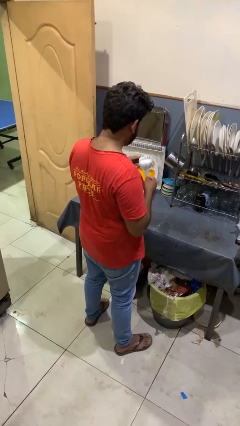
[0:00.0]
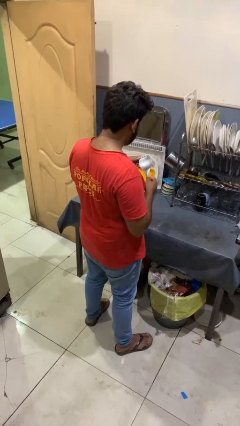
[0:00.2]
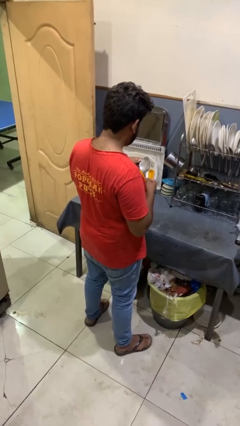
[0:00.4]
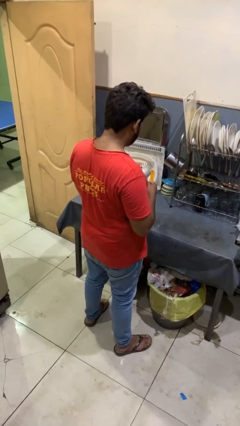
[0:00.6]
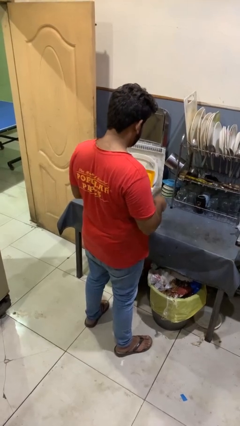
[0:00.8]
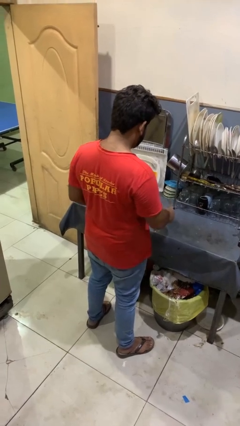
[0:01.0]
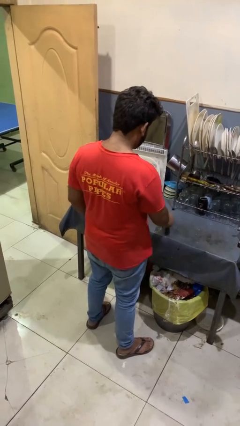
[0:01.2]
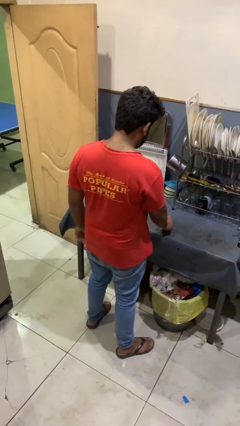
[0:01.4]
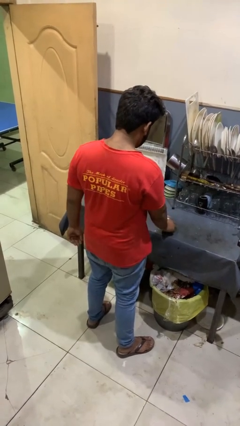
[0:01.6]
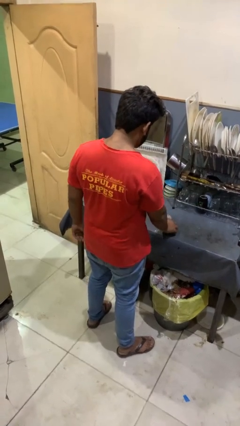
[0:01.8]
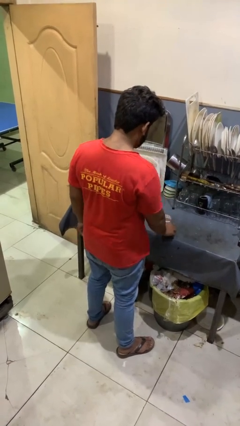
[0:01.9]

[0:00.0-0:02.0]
person puts down object on countertop

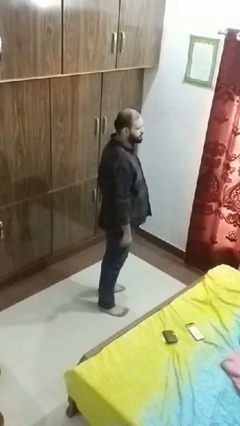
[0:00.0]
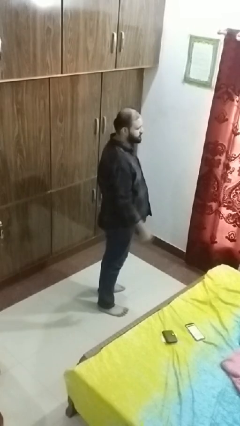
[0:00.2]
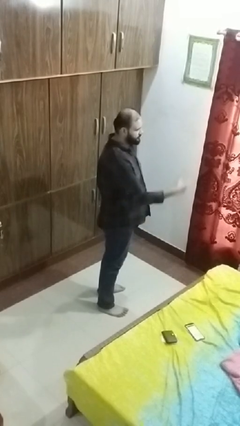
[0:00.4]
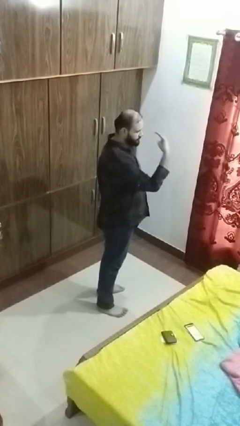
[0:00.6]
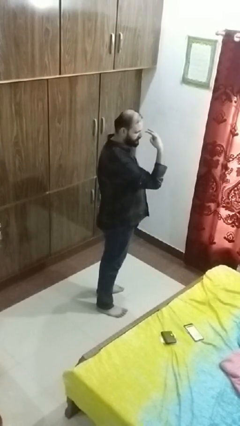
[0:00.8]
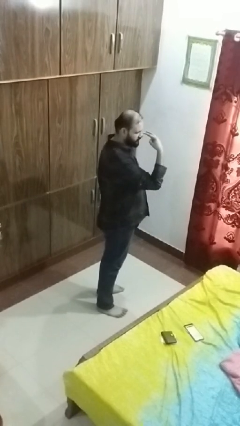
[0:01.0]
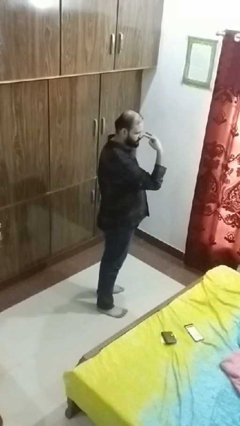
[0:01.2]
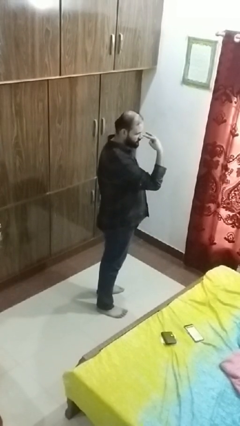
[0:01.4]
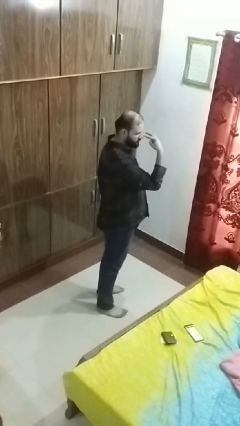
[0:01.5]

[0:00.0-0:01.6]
person gestures watch closely

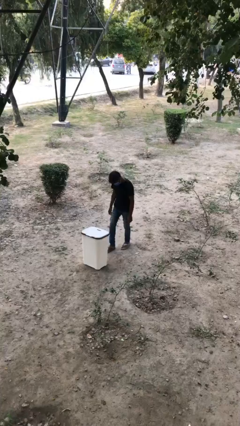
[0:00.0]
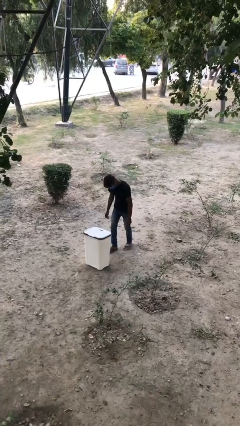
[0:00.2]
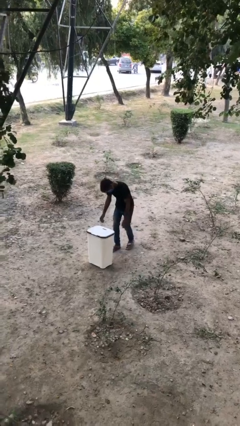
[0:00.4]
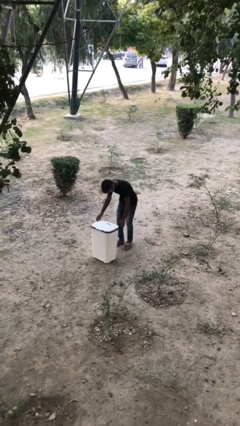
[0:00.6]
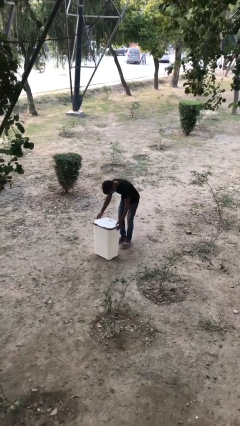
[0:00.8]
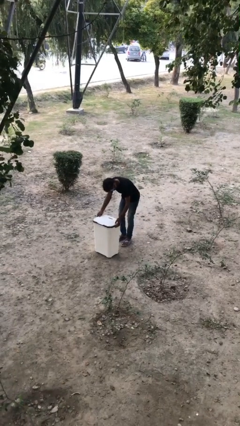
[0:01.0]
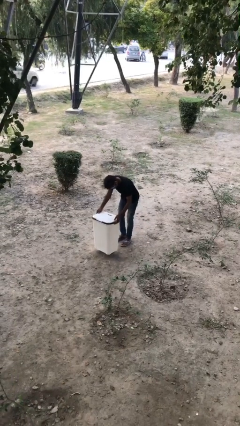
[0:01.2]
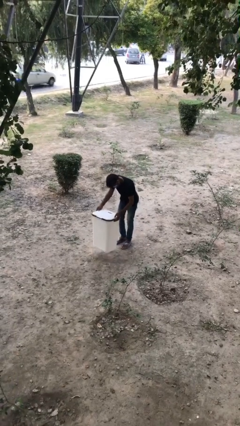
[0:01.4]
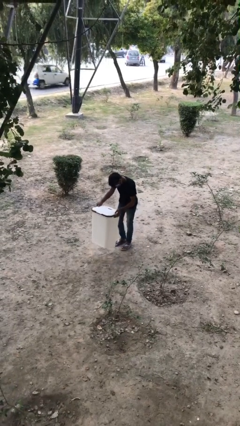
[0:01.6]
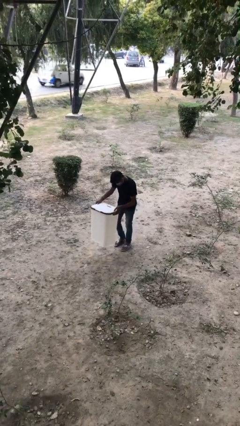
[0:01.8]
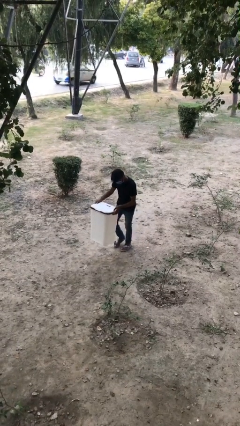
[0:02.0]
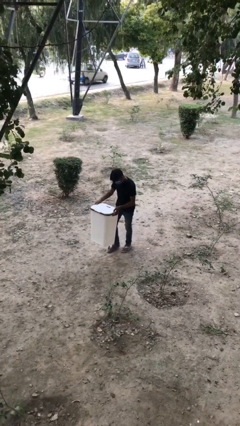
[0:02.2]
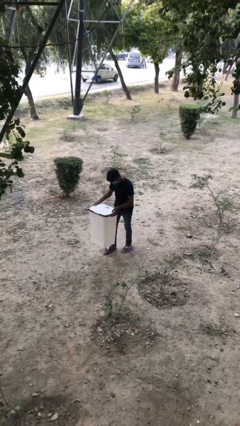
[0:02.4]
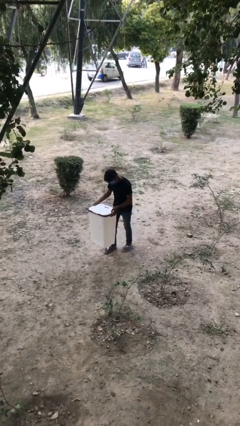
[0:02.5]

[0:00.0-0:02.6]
person picks up object from floor

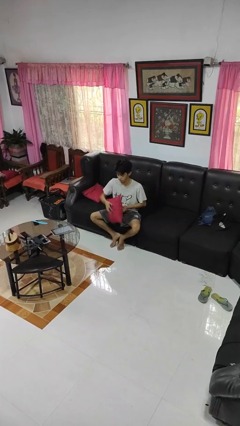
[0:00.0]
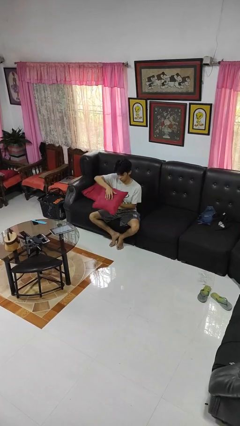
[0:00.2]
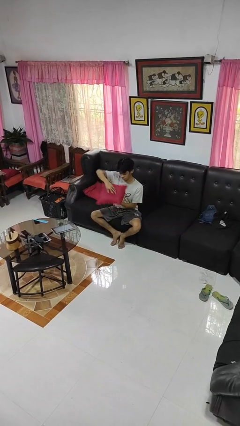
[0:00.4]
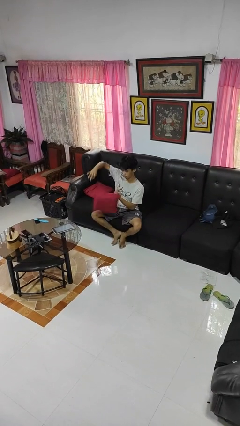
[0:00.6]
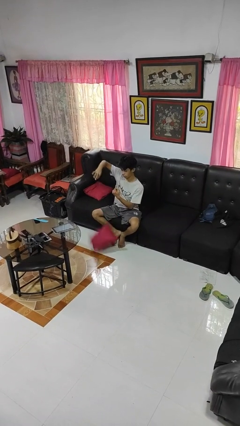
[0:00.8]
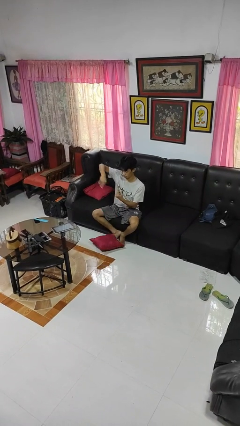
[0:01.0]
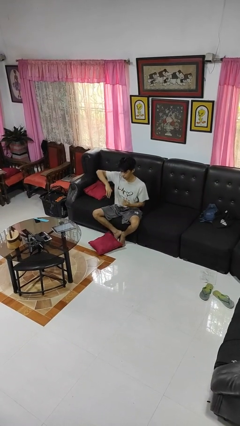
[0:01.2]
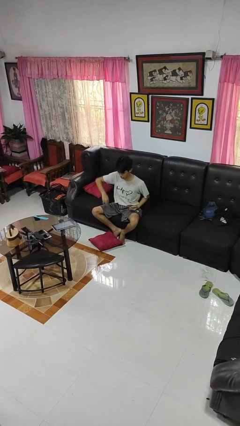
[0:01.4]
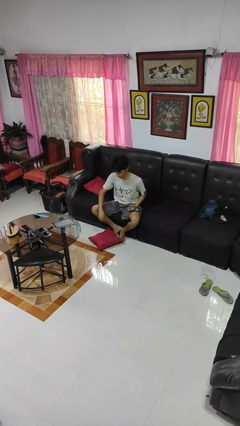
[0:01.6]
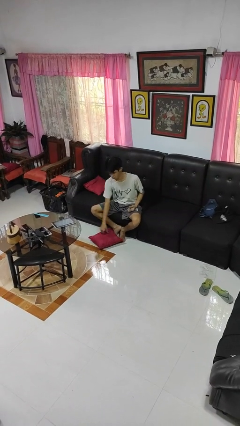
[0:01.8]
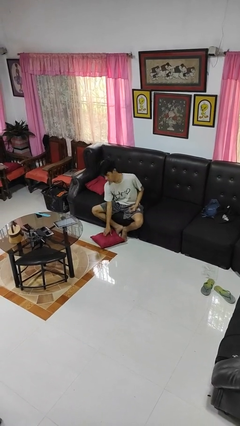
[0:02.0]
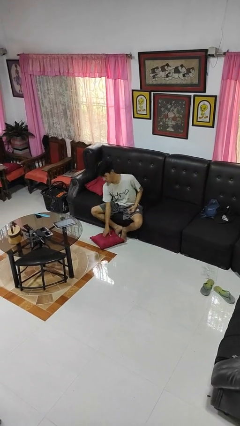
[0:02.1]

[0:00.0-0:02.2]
person drops object

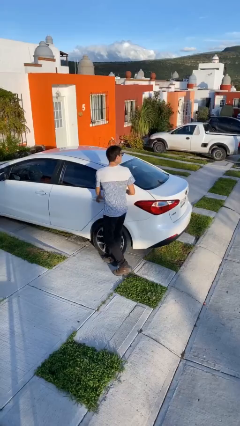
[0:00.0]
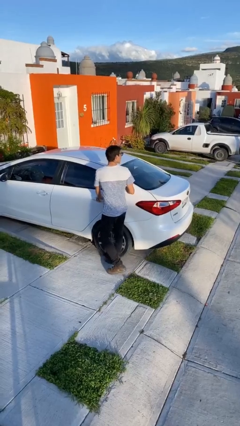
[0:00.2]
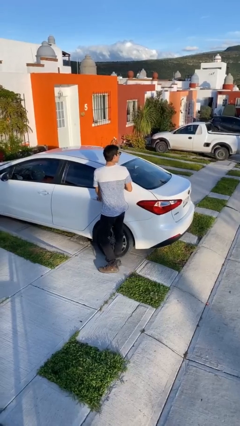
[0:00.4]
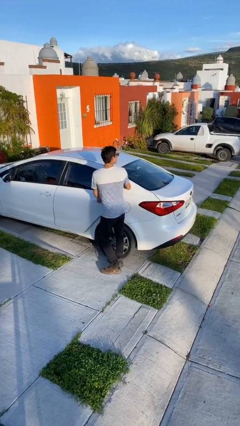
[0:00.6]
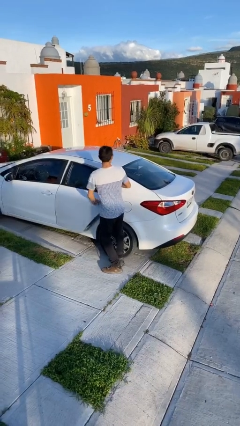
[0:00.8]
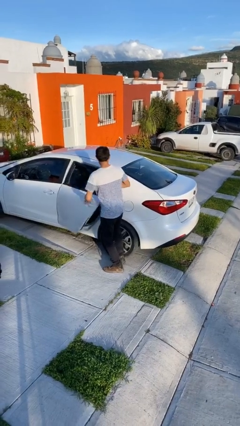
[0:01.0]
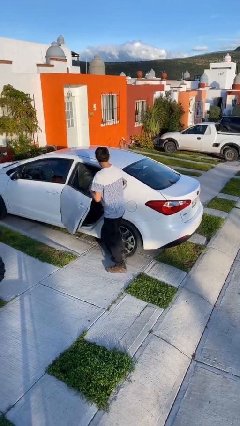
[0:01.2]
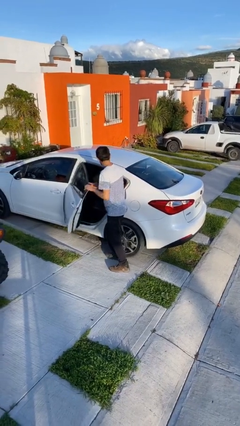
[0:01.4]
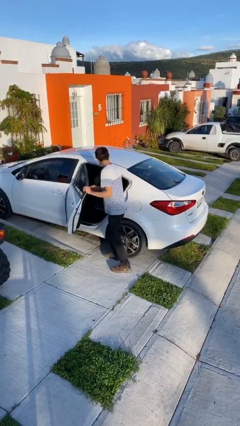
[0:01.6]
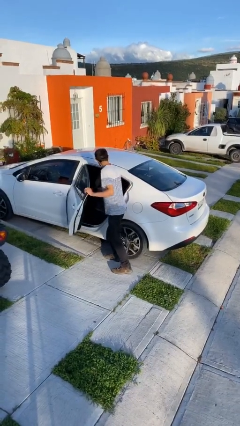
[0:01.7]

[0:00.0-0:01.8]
person opens car door

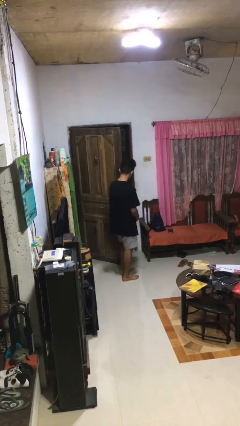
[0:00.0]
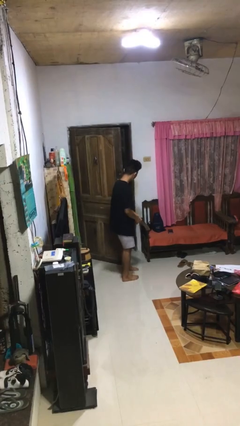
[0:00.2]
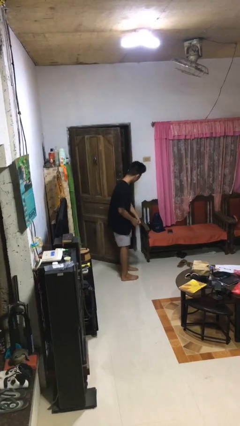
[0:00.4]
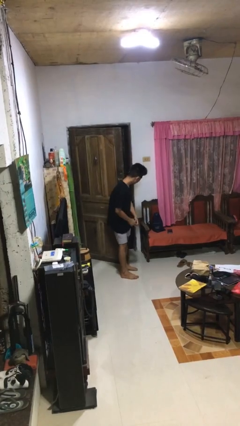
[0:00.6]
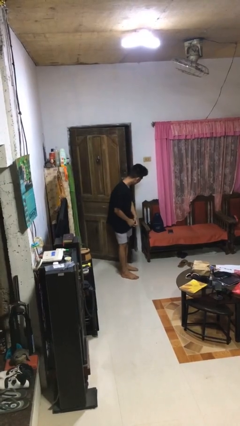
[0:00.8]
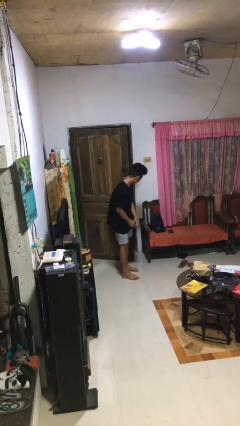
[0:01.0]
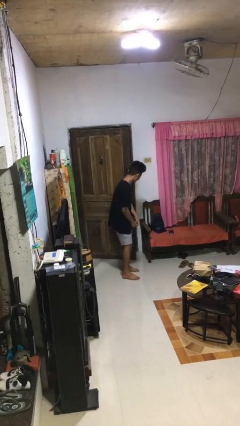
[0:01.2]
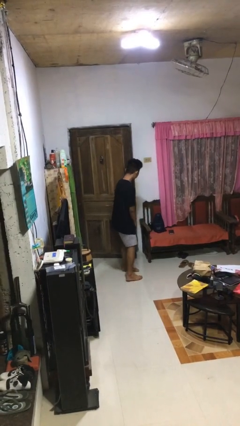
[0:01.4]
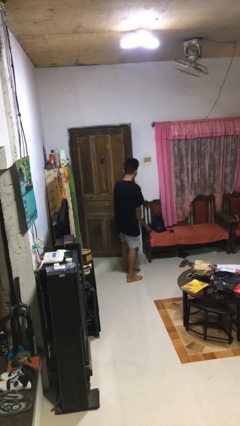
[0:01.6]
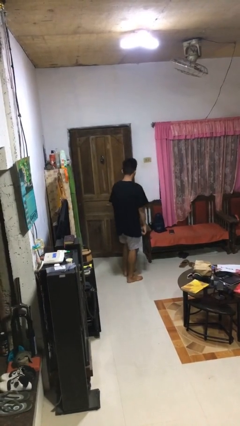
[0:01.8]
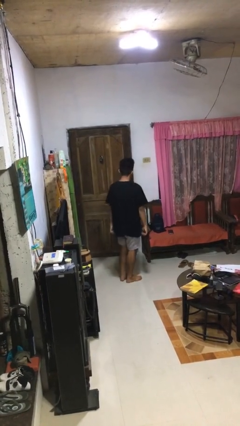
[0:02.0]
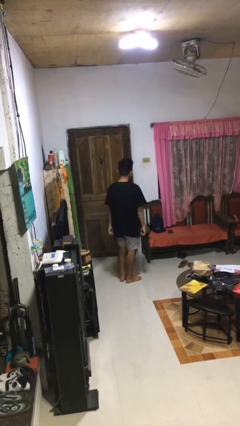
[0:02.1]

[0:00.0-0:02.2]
person closes door with hip

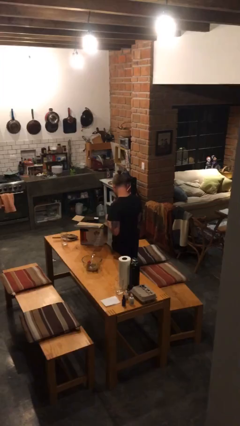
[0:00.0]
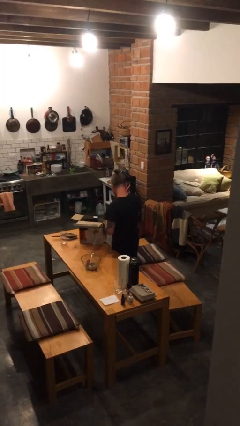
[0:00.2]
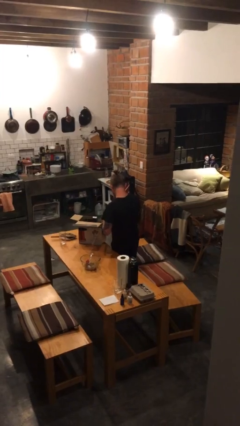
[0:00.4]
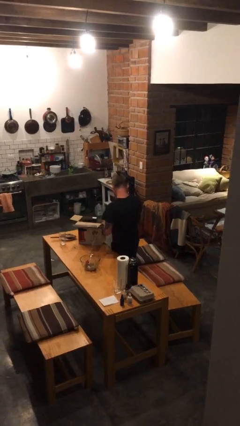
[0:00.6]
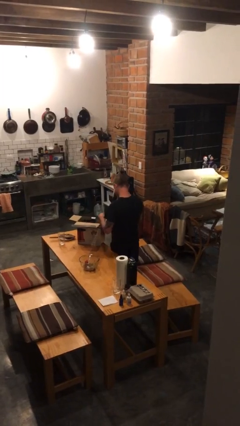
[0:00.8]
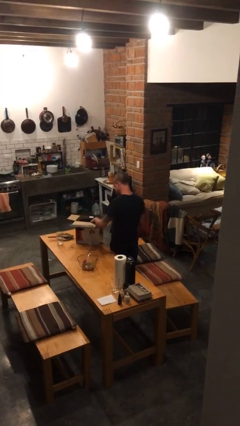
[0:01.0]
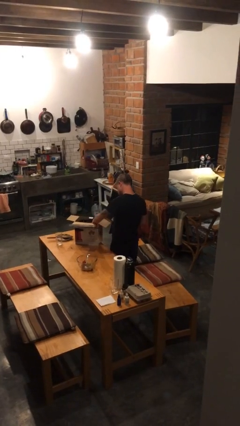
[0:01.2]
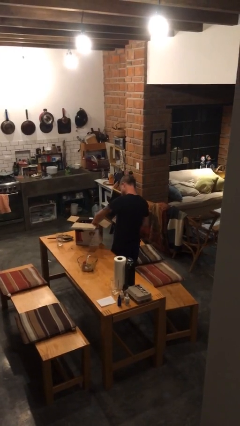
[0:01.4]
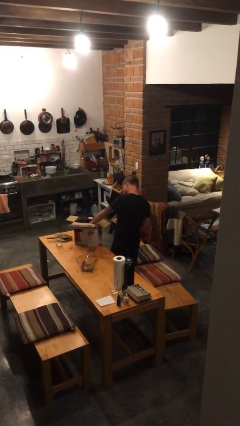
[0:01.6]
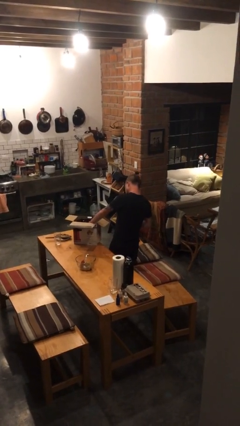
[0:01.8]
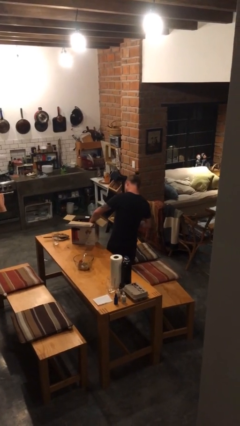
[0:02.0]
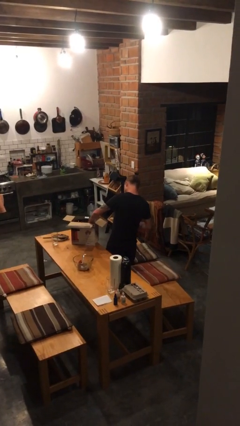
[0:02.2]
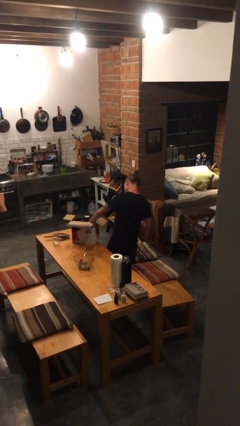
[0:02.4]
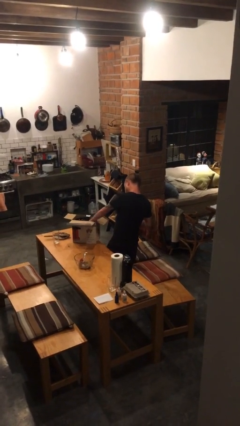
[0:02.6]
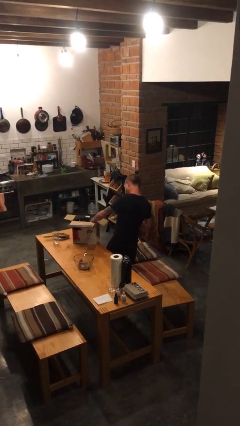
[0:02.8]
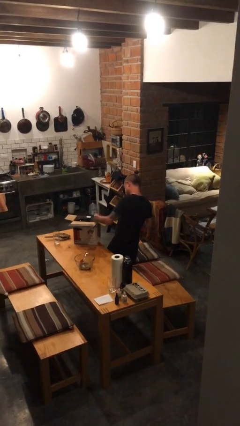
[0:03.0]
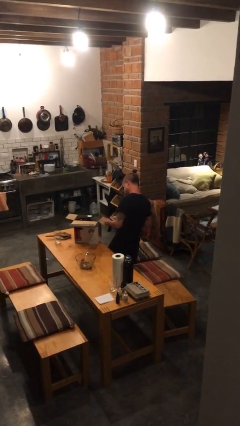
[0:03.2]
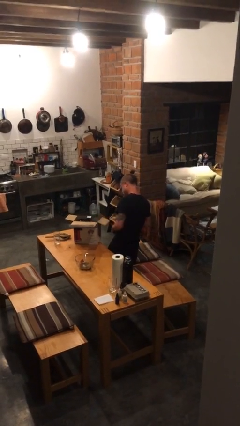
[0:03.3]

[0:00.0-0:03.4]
person searches in box

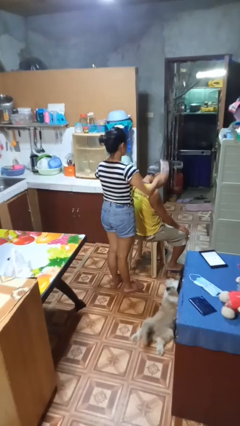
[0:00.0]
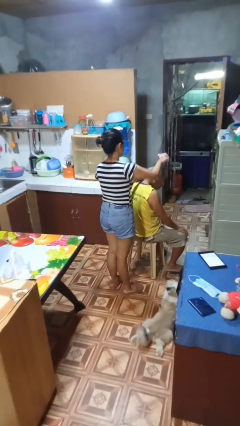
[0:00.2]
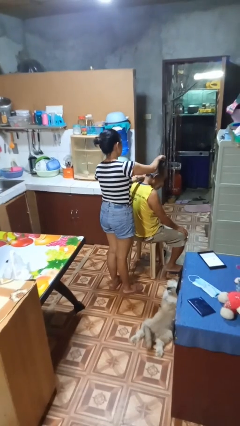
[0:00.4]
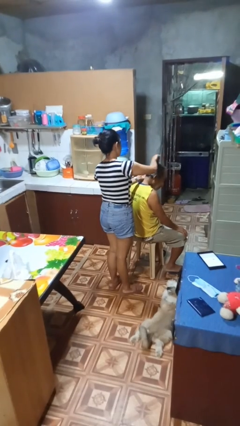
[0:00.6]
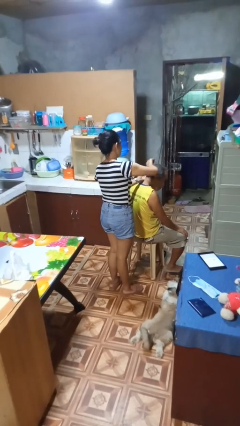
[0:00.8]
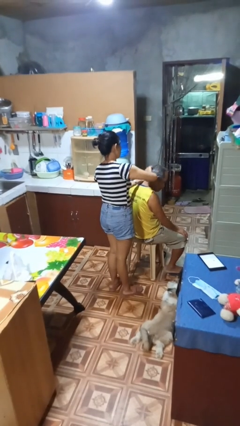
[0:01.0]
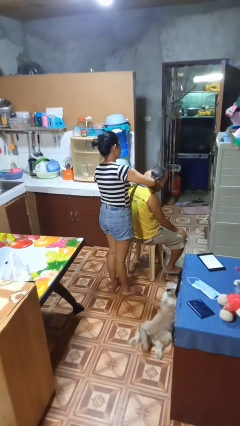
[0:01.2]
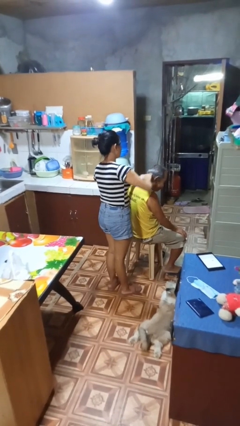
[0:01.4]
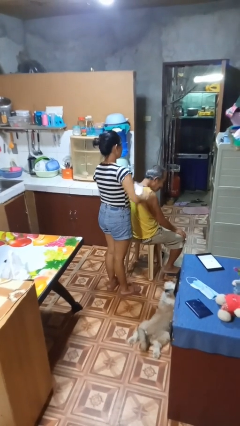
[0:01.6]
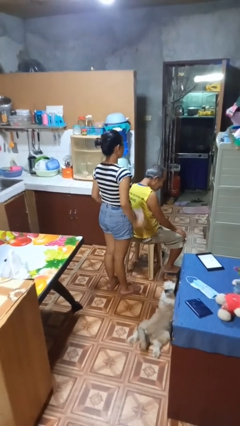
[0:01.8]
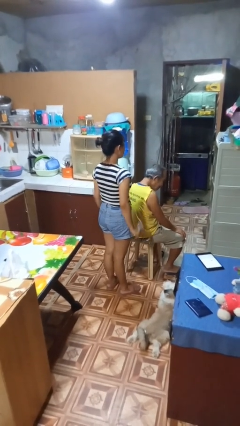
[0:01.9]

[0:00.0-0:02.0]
person brushes hair of person
